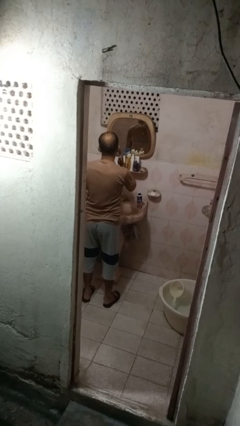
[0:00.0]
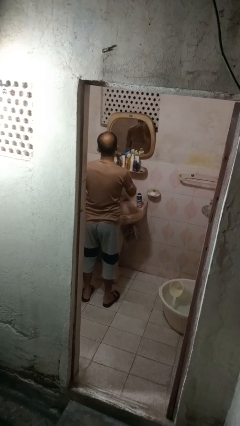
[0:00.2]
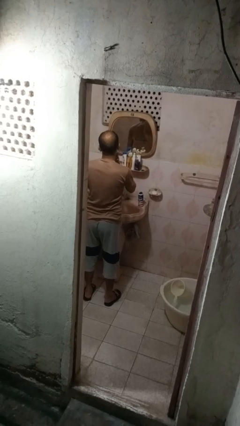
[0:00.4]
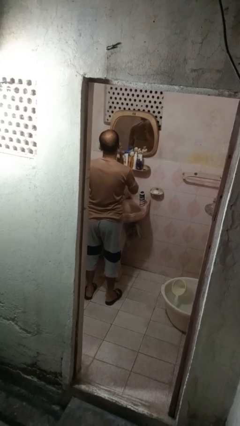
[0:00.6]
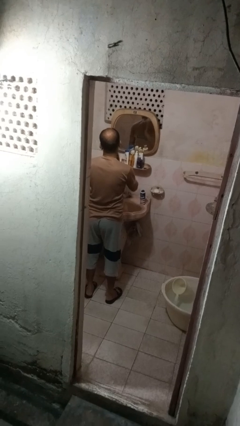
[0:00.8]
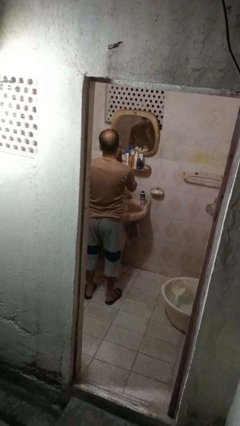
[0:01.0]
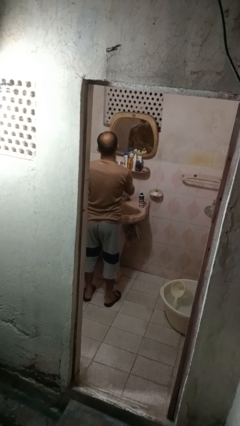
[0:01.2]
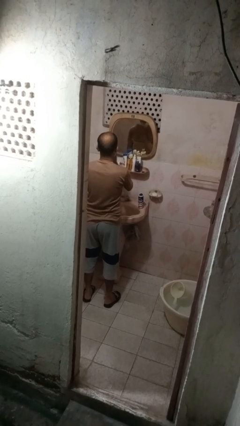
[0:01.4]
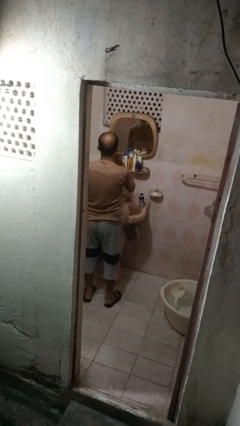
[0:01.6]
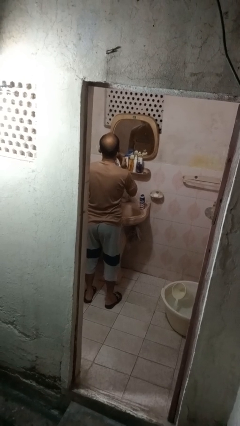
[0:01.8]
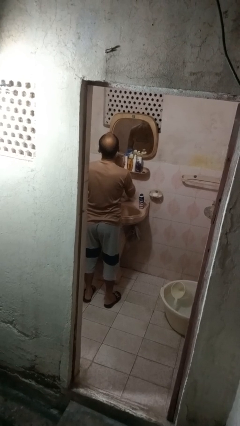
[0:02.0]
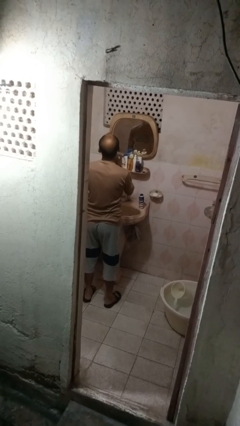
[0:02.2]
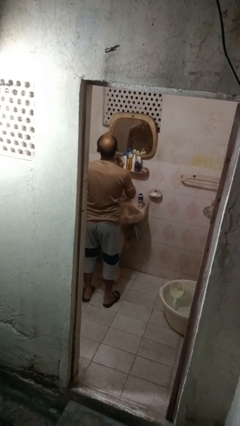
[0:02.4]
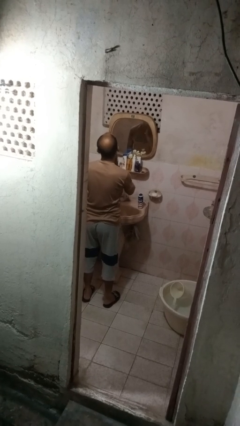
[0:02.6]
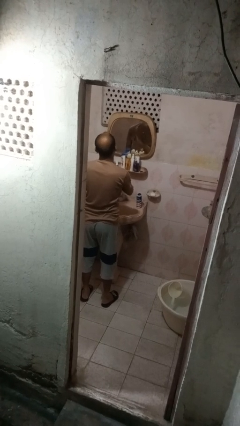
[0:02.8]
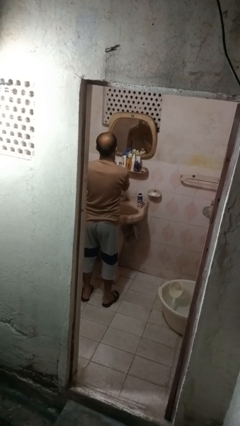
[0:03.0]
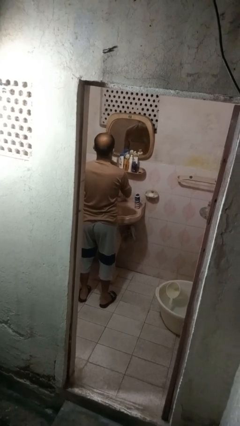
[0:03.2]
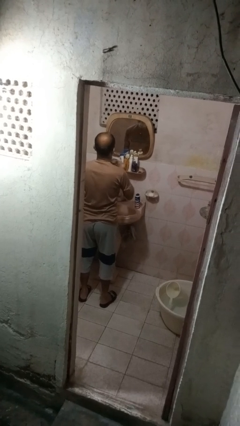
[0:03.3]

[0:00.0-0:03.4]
person applies shaving cream

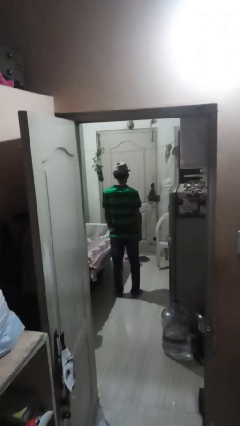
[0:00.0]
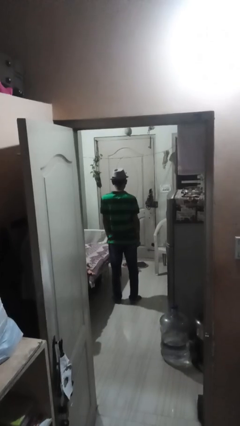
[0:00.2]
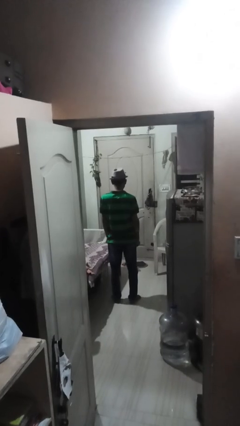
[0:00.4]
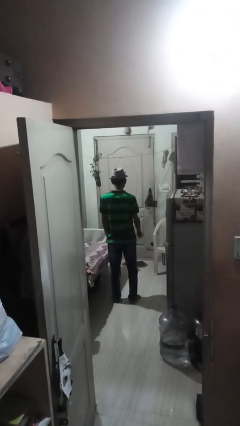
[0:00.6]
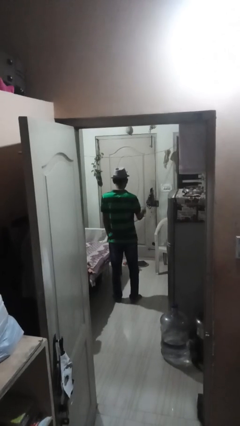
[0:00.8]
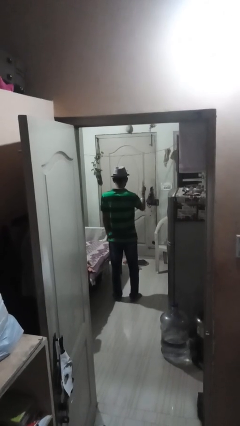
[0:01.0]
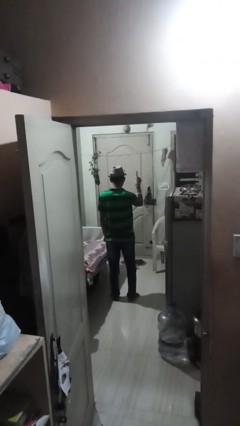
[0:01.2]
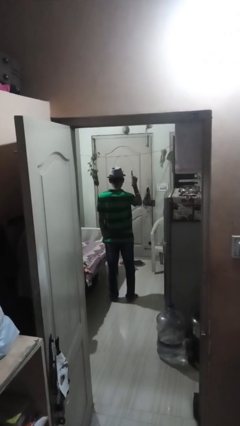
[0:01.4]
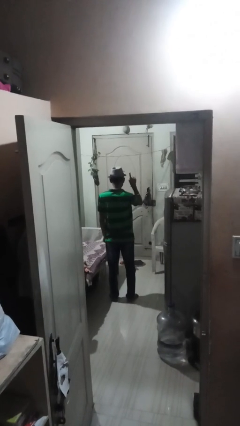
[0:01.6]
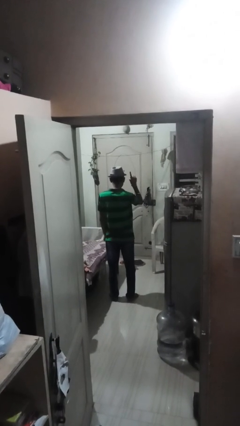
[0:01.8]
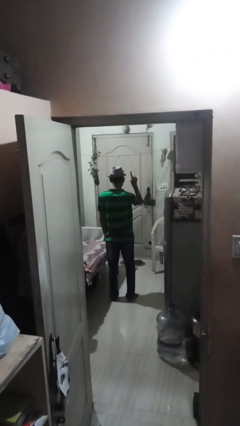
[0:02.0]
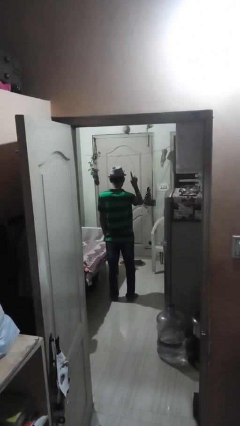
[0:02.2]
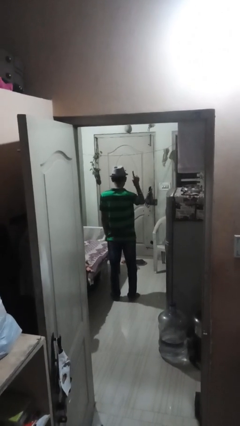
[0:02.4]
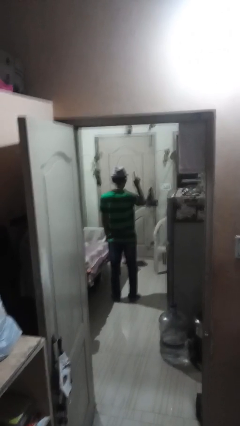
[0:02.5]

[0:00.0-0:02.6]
person gestures number one

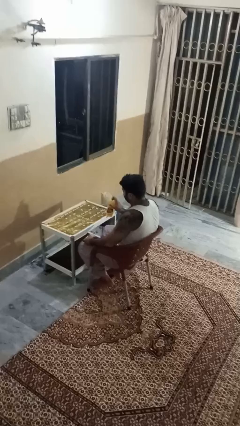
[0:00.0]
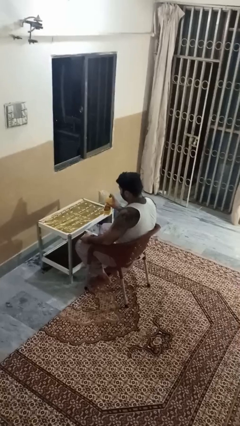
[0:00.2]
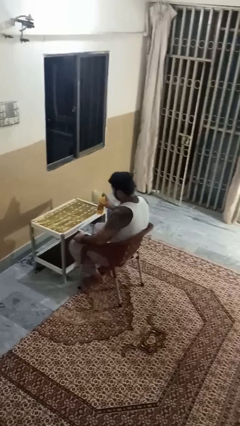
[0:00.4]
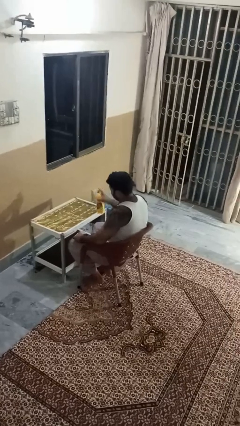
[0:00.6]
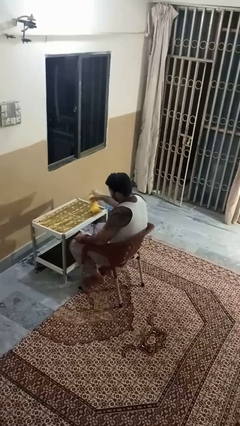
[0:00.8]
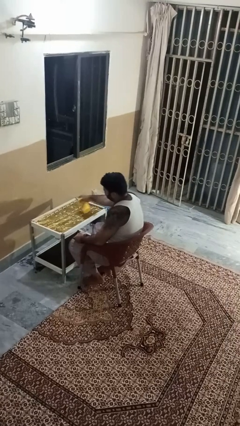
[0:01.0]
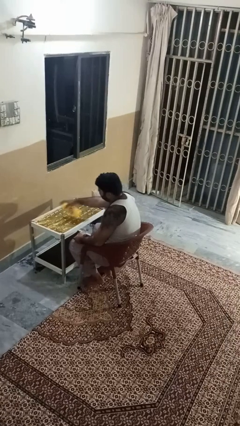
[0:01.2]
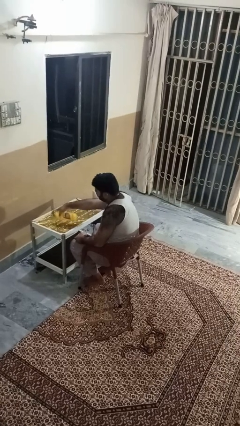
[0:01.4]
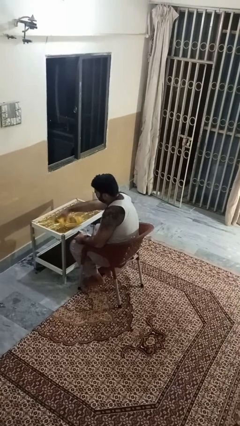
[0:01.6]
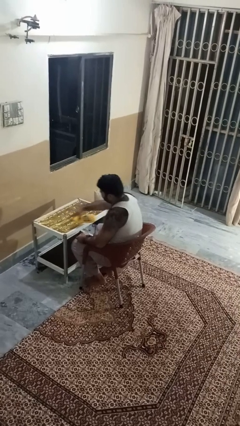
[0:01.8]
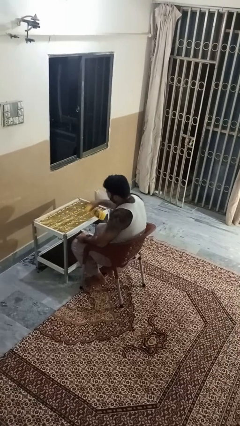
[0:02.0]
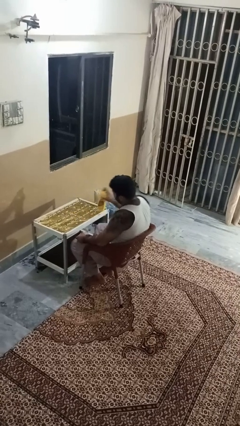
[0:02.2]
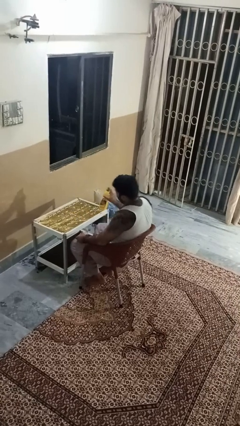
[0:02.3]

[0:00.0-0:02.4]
person sprays from bottle

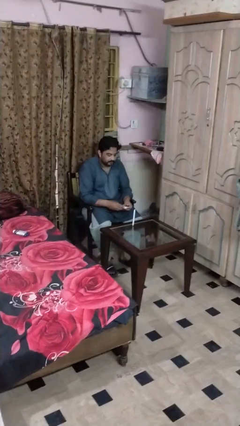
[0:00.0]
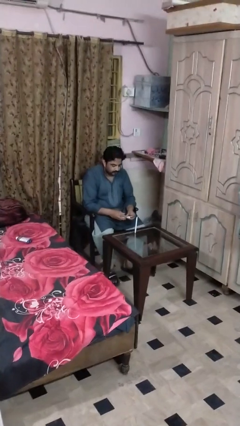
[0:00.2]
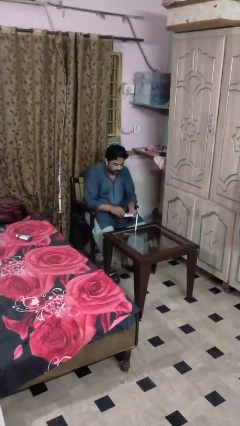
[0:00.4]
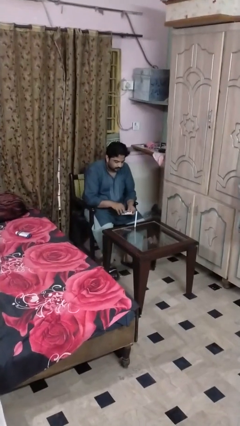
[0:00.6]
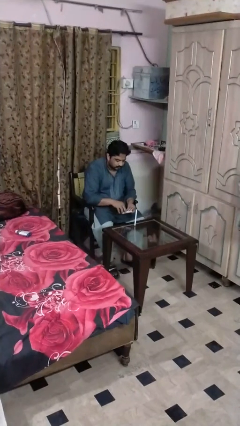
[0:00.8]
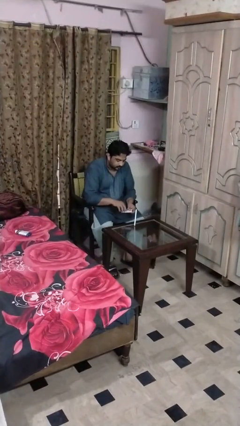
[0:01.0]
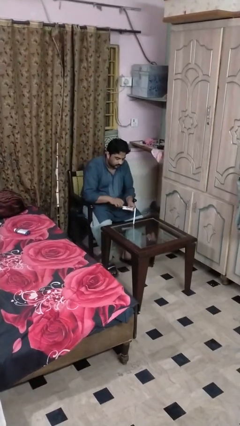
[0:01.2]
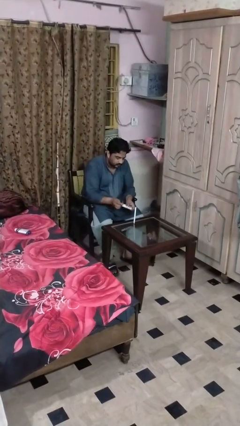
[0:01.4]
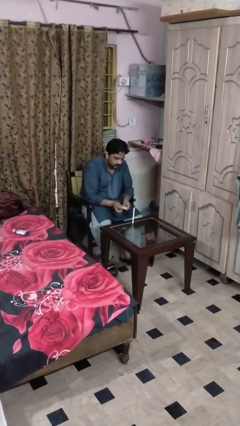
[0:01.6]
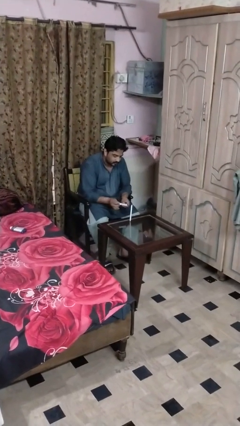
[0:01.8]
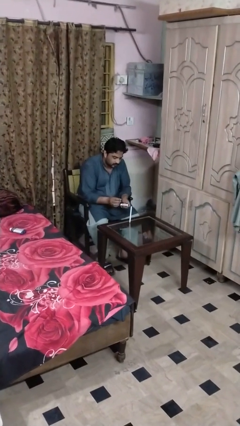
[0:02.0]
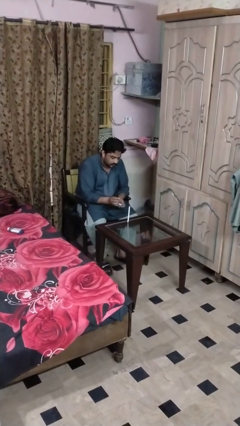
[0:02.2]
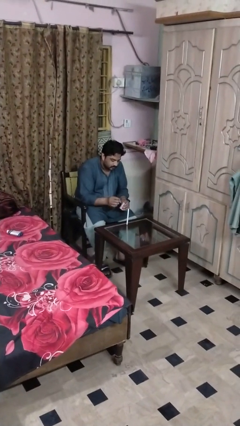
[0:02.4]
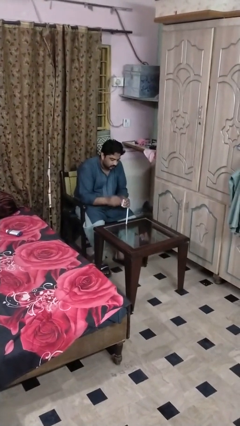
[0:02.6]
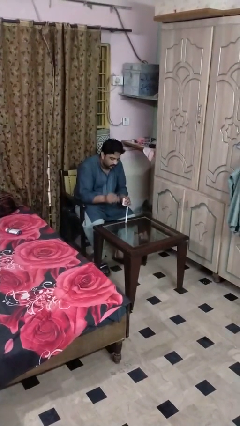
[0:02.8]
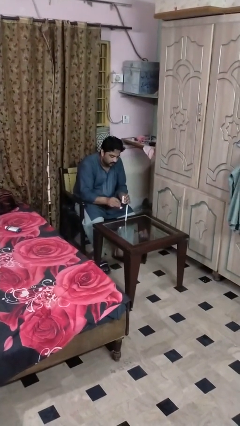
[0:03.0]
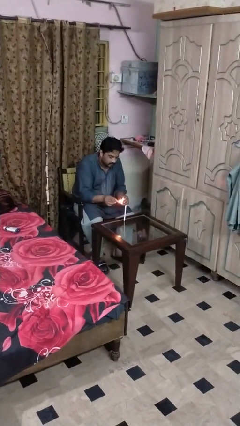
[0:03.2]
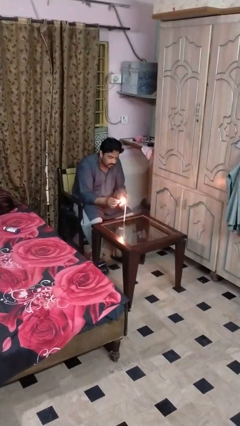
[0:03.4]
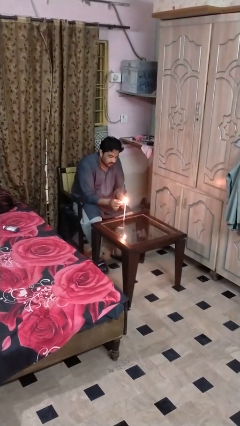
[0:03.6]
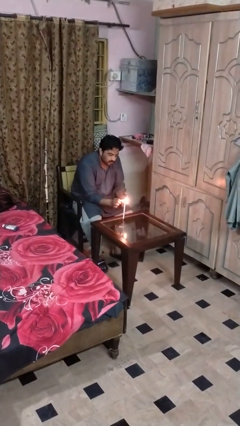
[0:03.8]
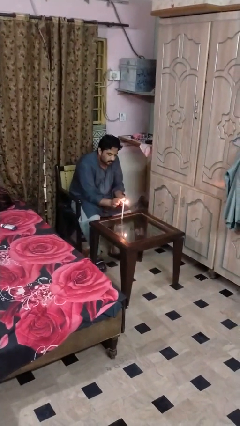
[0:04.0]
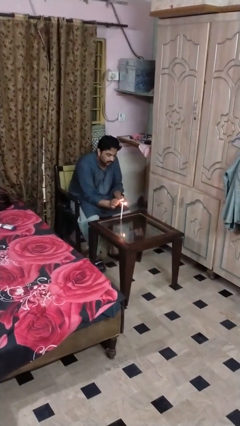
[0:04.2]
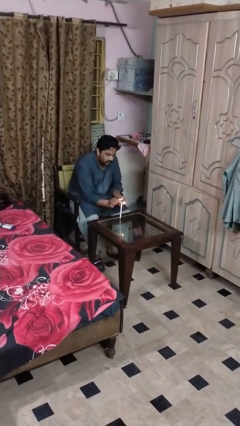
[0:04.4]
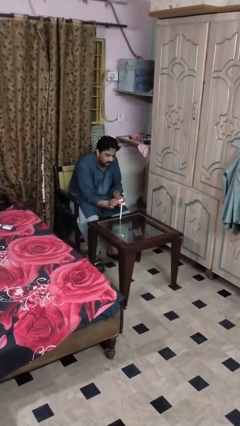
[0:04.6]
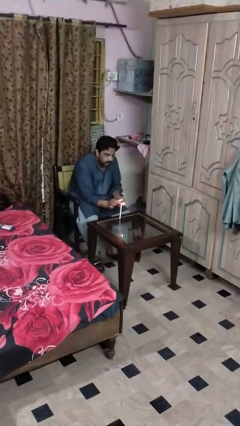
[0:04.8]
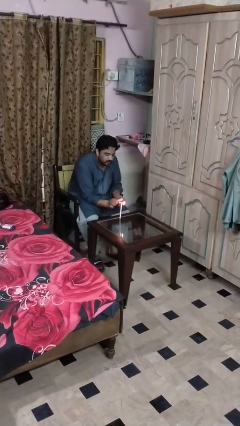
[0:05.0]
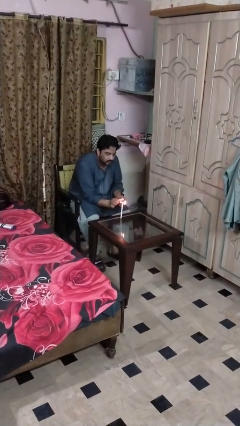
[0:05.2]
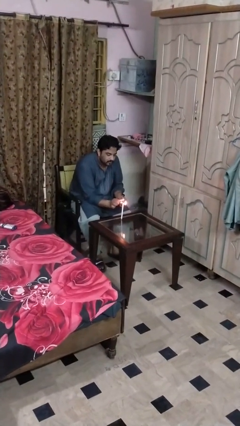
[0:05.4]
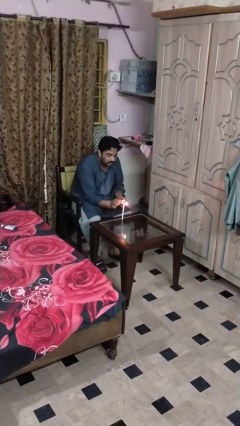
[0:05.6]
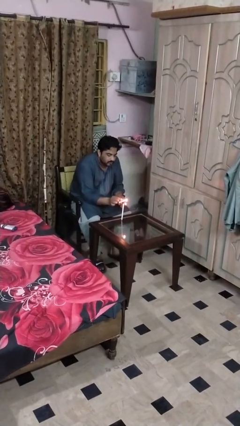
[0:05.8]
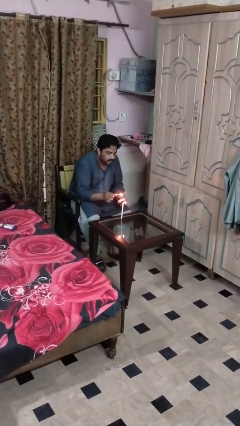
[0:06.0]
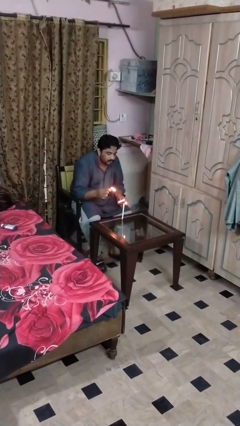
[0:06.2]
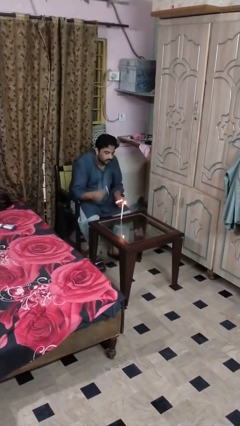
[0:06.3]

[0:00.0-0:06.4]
person lights candle

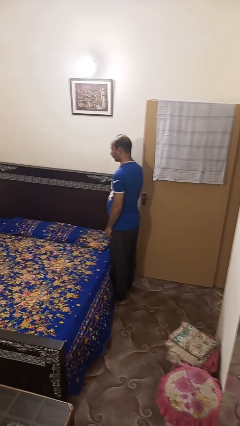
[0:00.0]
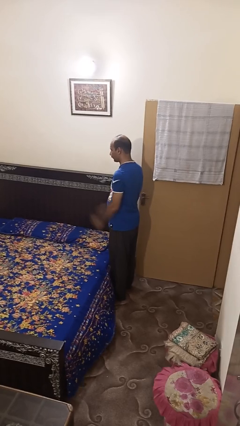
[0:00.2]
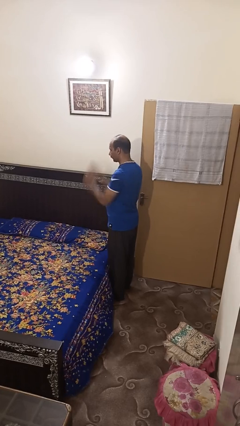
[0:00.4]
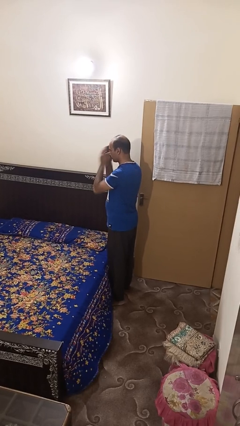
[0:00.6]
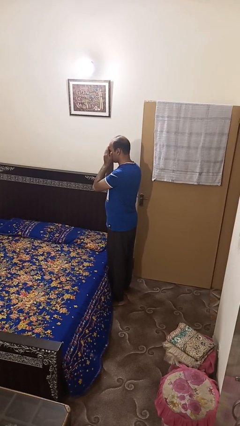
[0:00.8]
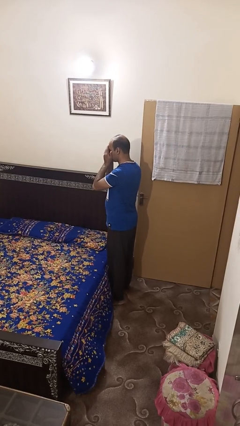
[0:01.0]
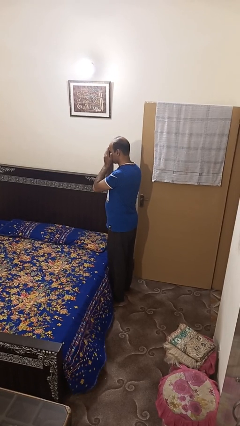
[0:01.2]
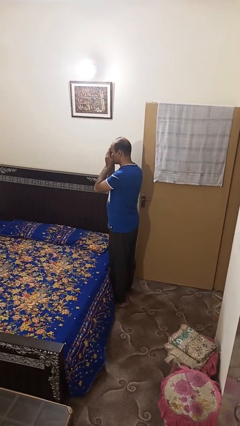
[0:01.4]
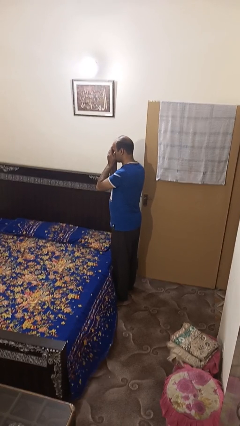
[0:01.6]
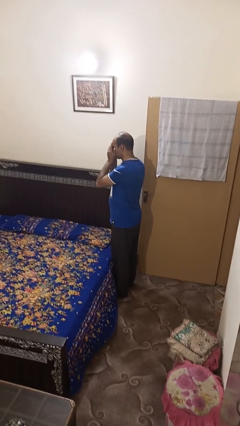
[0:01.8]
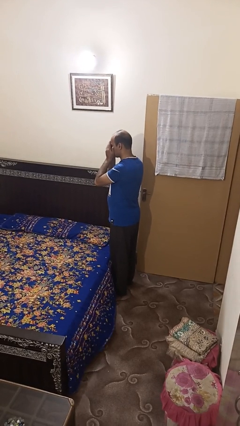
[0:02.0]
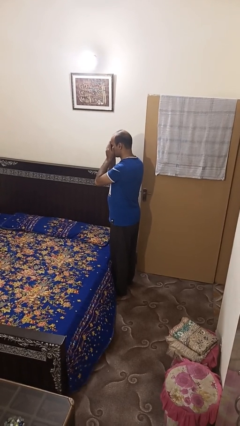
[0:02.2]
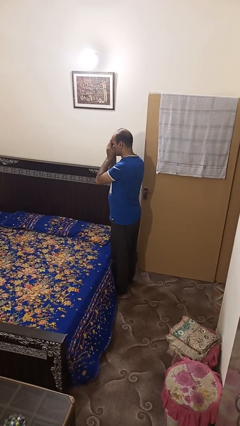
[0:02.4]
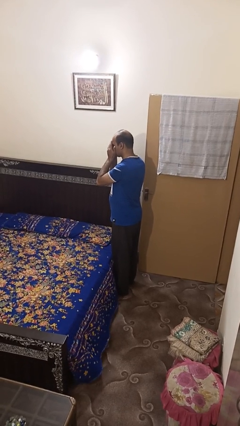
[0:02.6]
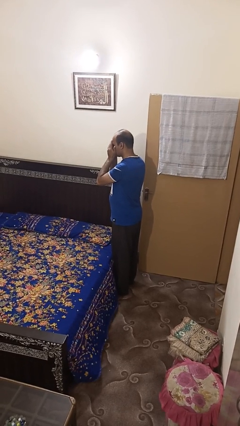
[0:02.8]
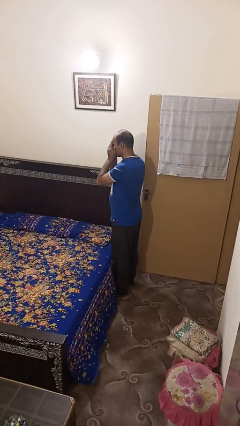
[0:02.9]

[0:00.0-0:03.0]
person covers face with hands
